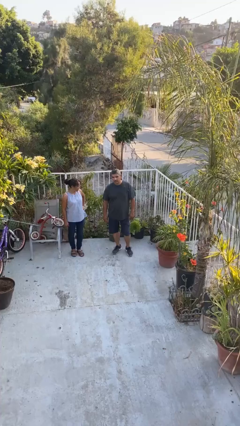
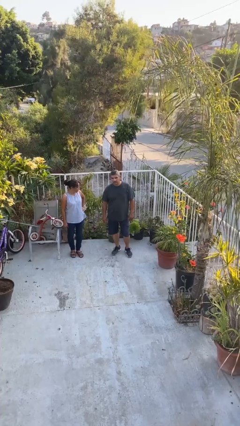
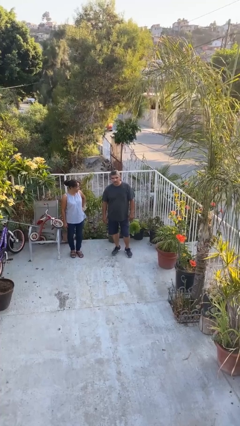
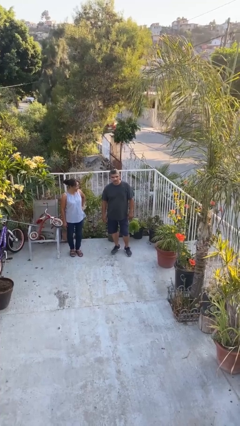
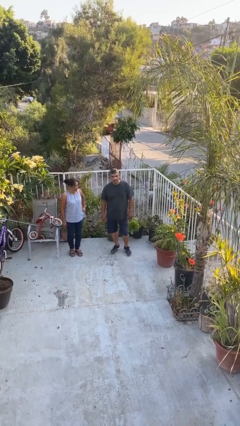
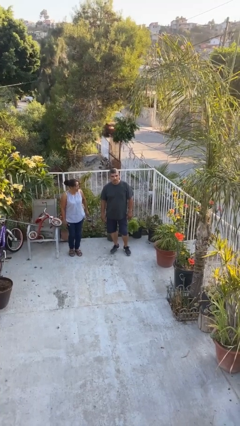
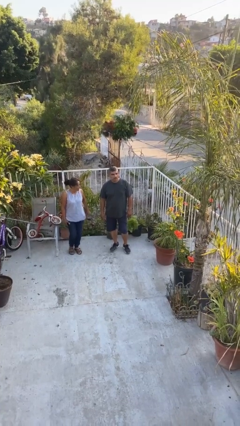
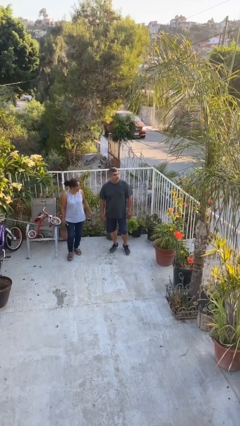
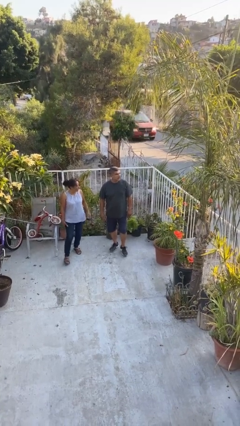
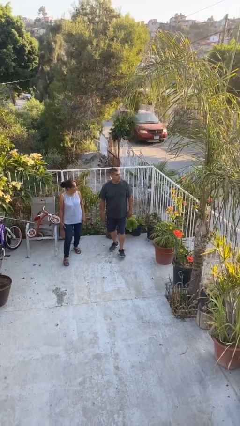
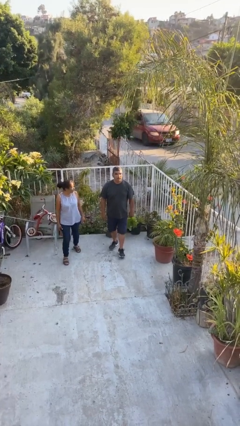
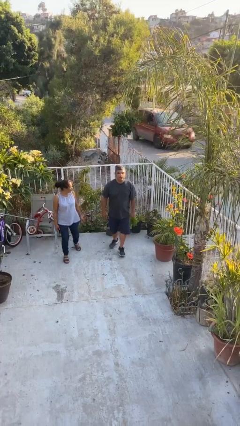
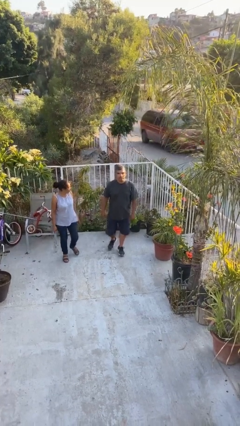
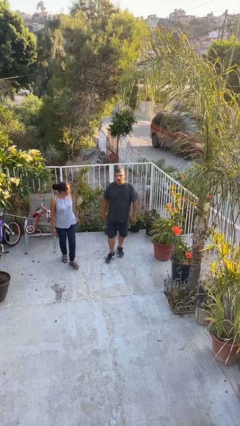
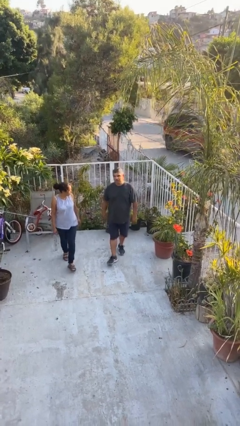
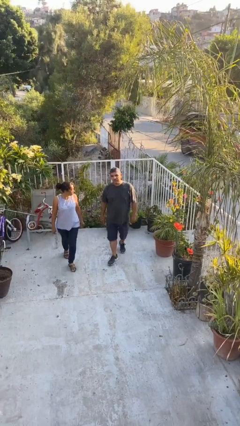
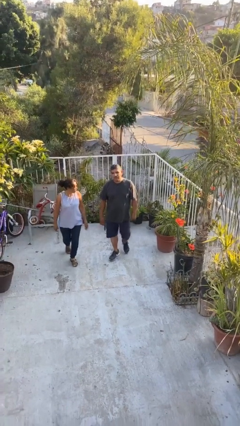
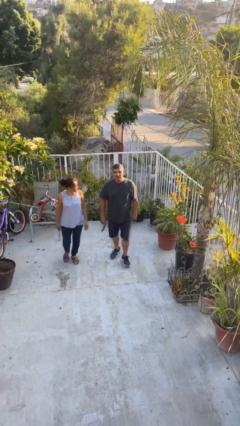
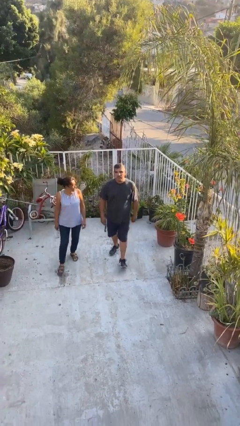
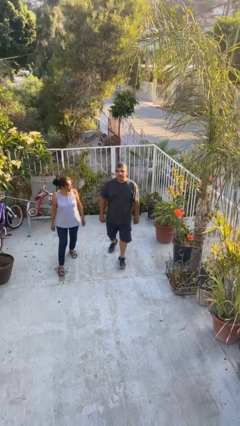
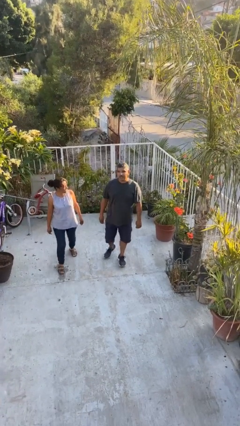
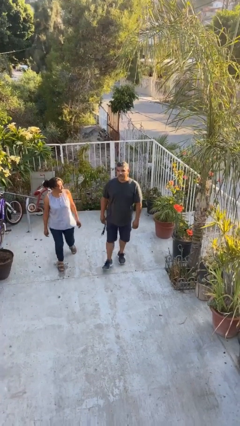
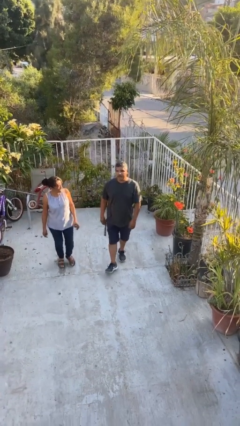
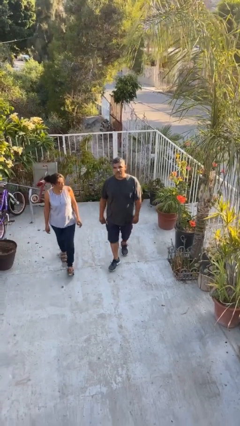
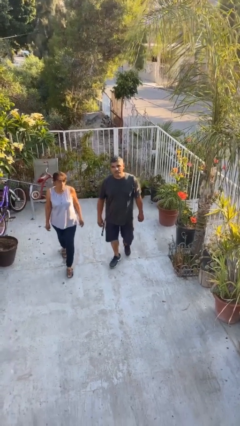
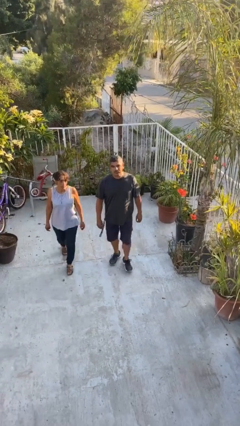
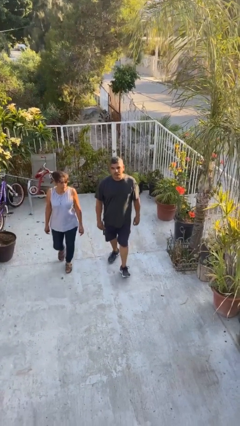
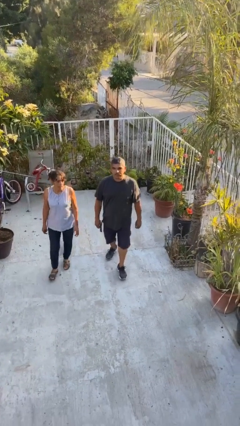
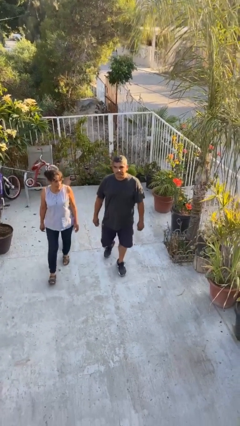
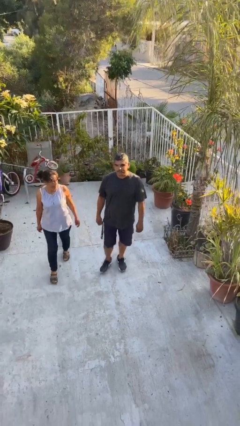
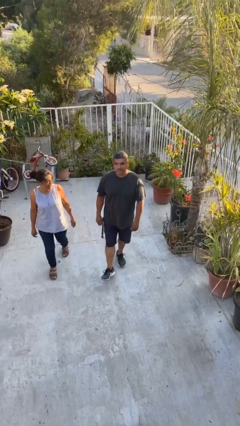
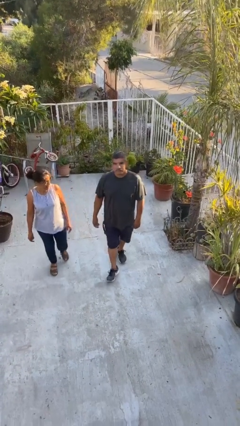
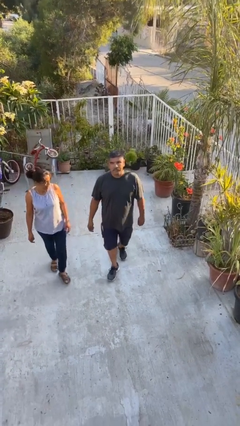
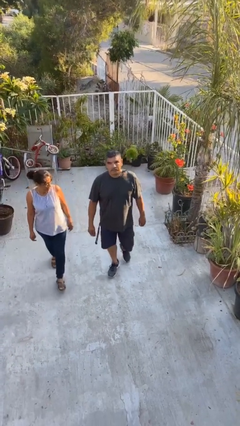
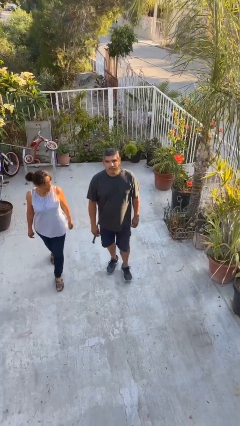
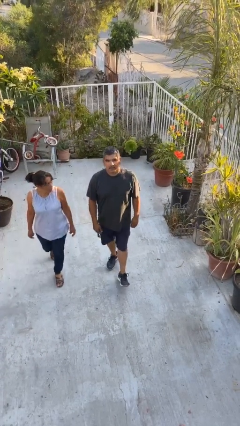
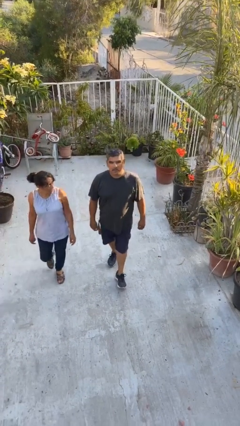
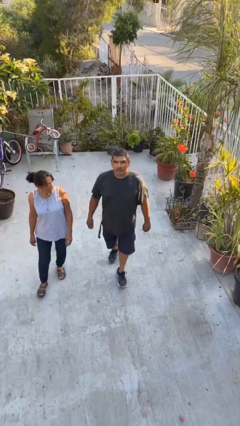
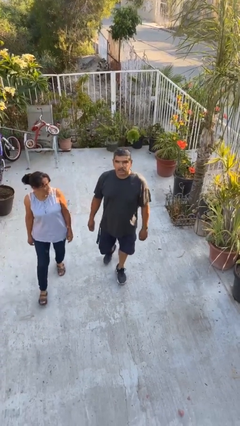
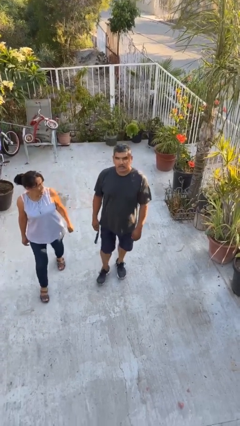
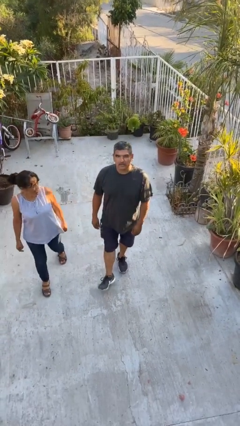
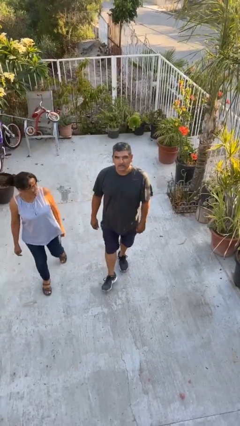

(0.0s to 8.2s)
person talks to person

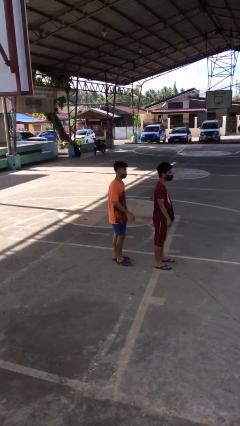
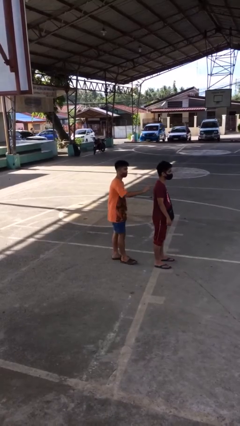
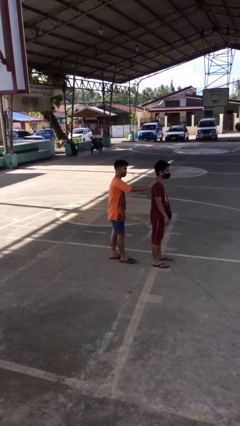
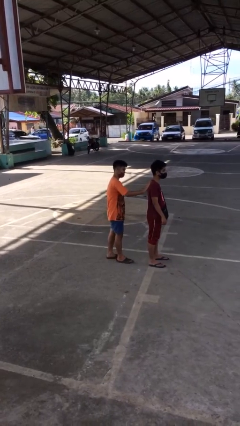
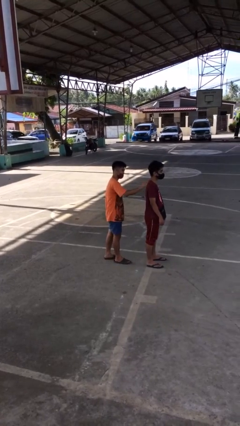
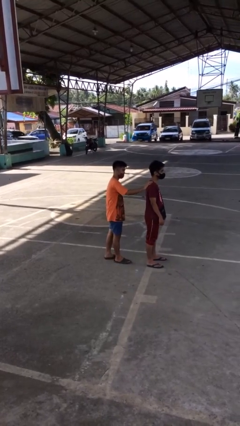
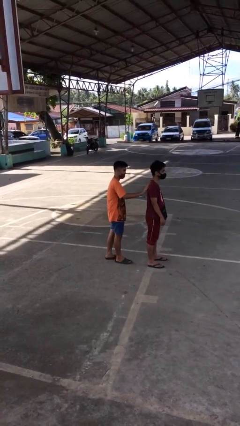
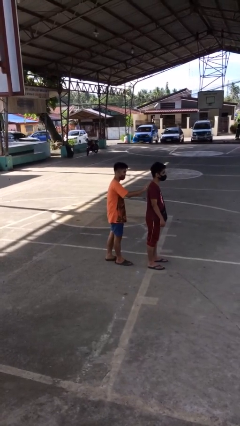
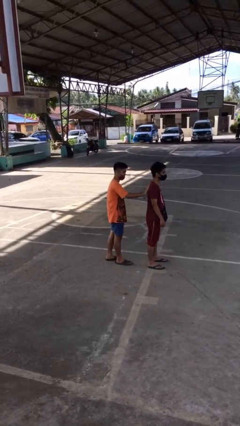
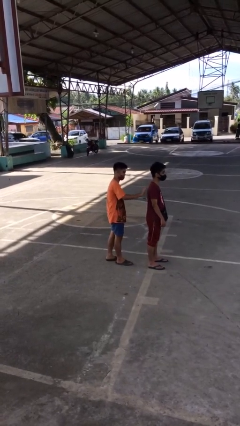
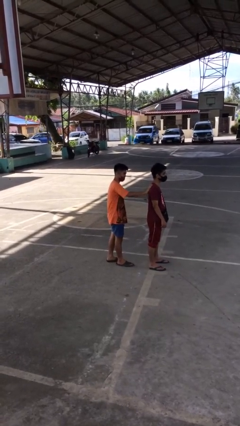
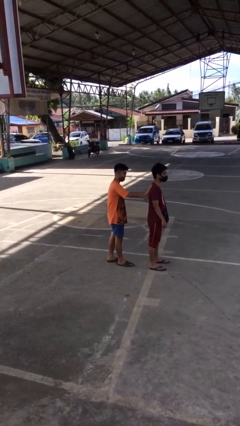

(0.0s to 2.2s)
person touches back of person

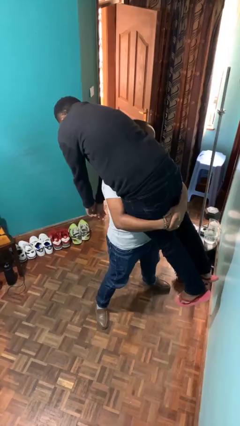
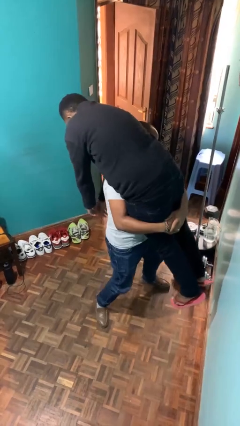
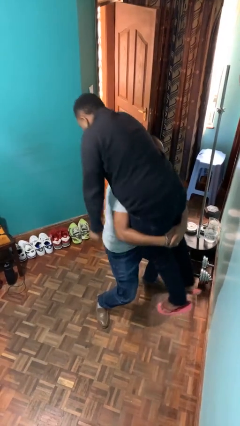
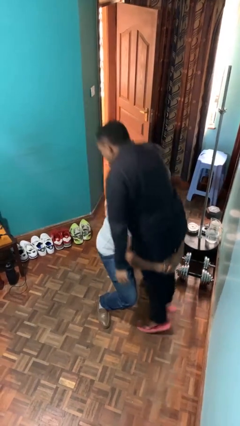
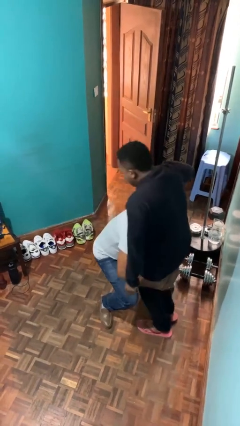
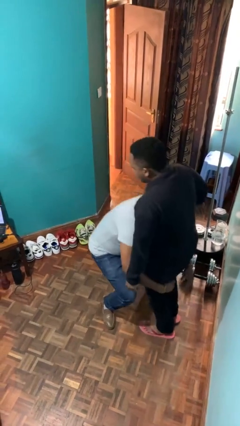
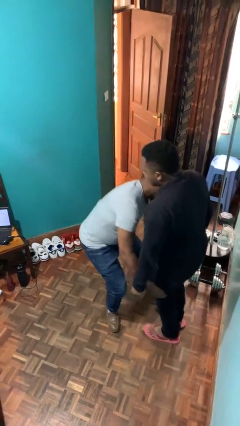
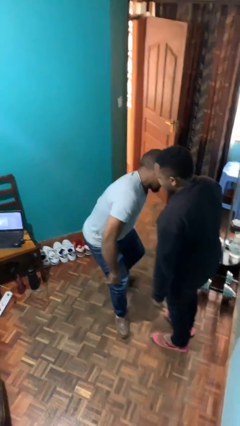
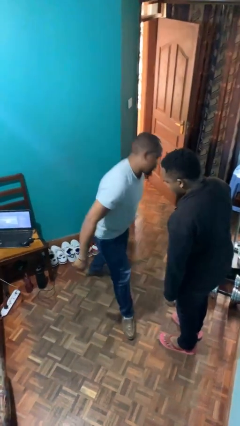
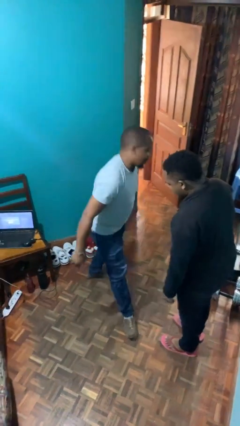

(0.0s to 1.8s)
person puts down person

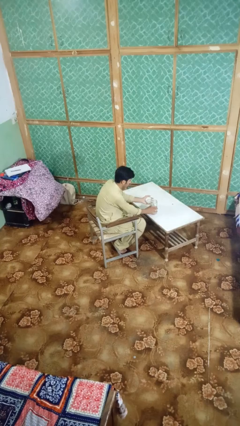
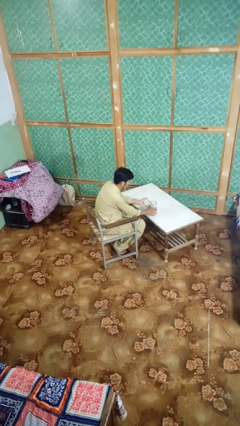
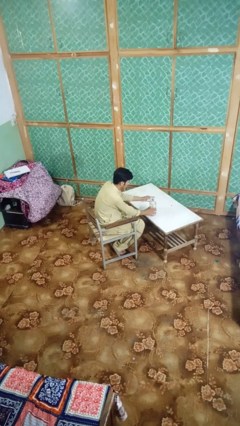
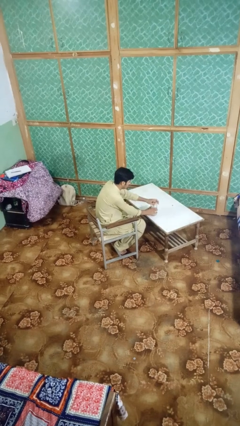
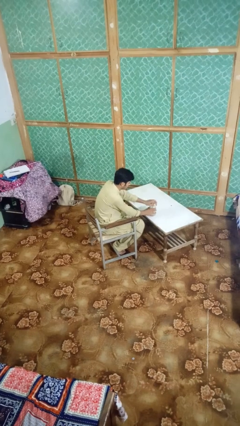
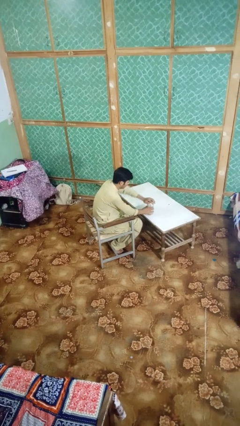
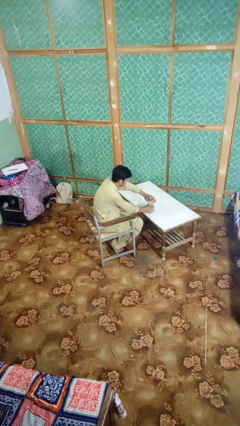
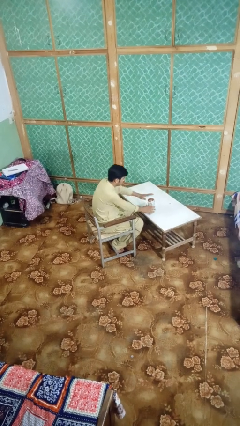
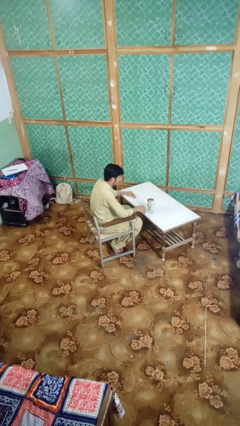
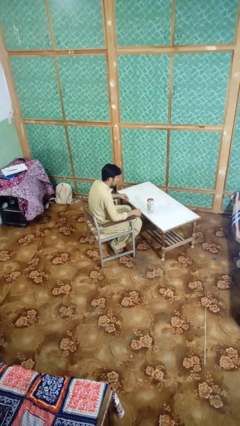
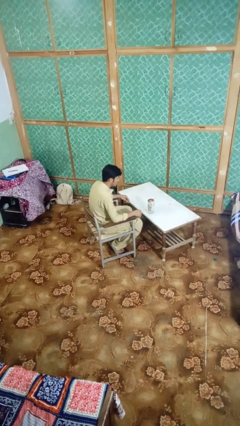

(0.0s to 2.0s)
person closes jar

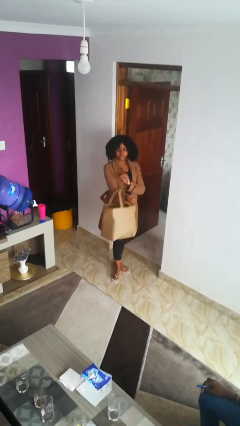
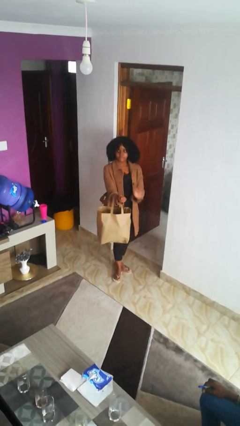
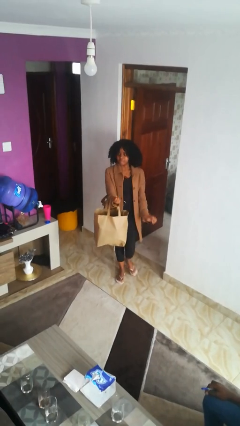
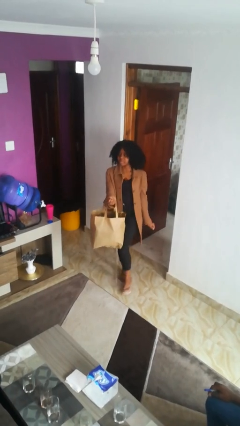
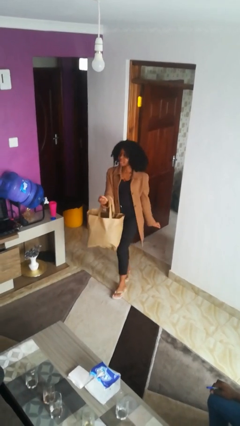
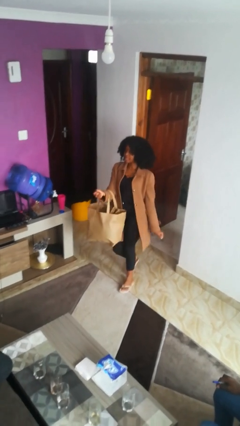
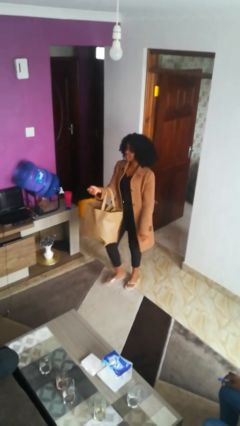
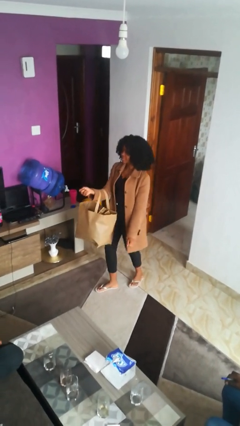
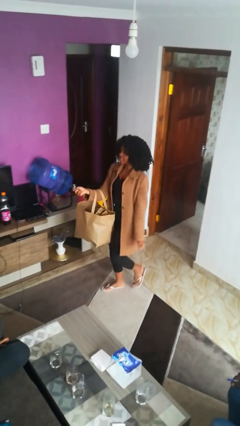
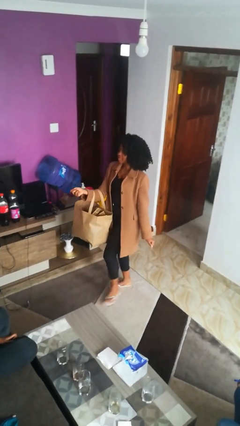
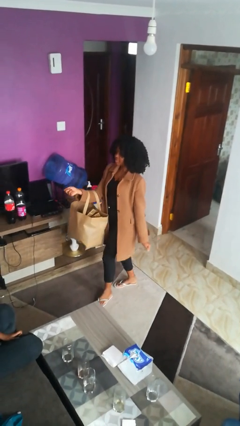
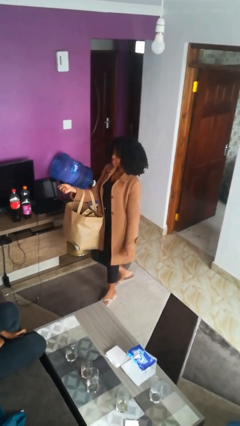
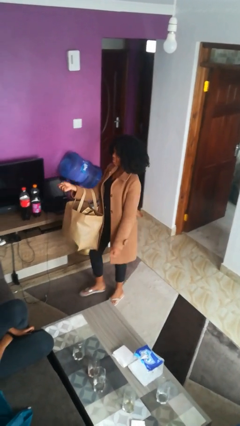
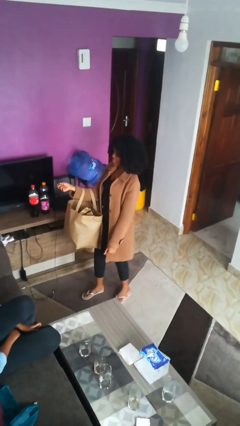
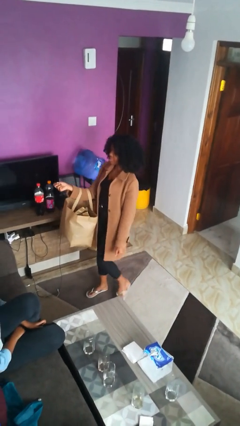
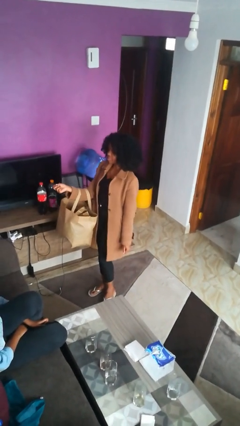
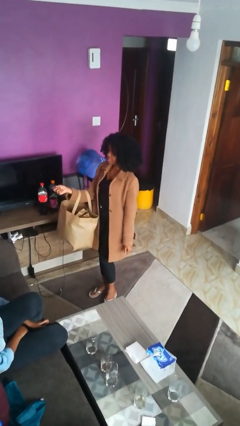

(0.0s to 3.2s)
person carries groceries
